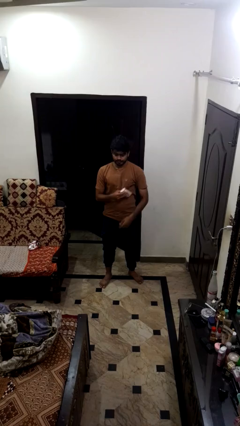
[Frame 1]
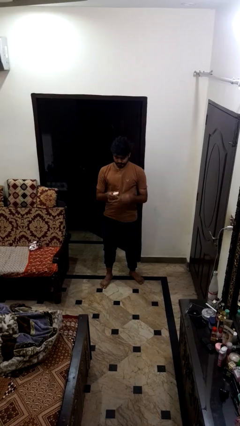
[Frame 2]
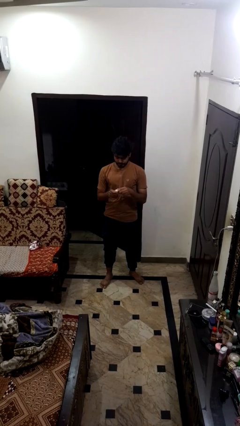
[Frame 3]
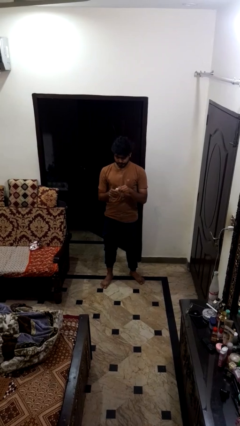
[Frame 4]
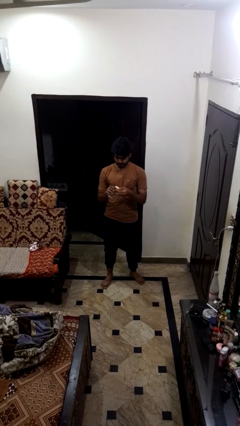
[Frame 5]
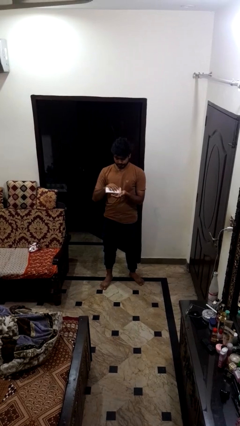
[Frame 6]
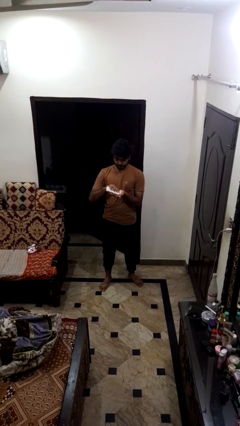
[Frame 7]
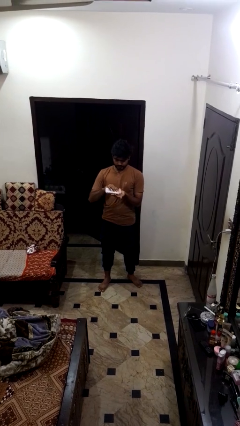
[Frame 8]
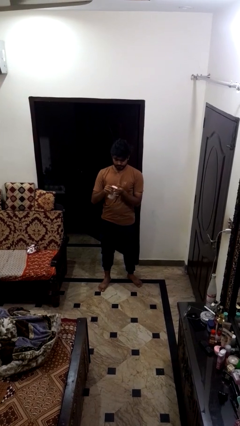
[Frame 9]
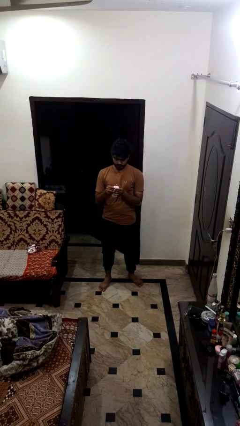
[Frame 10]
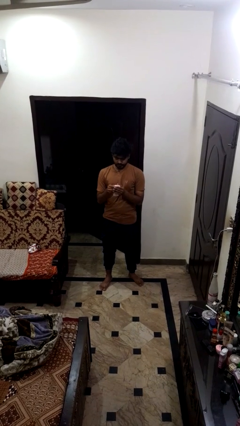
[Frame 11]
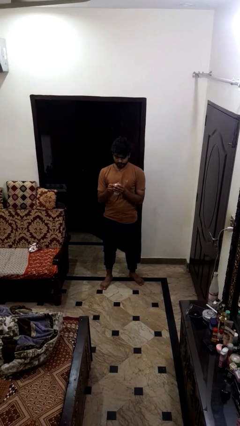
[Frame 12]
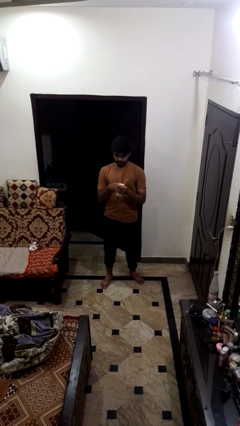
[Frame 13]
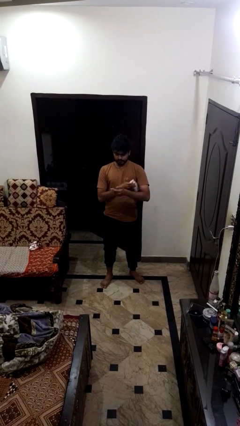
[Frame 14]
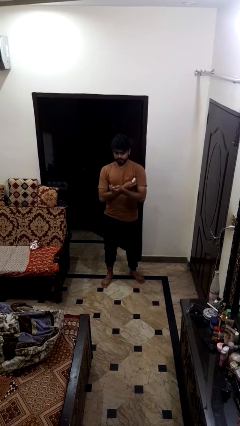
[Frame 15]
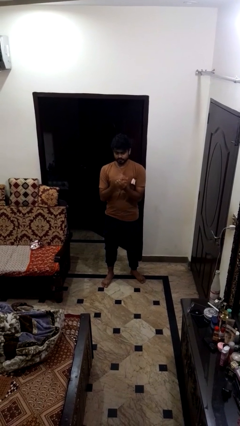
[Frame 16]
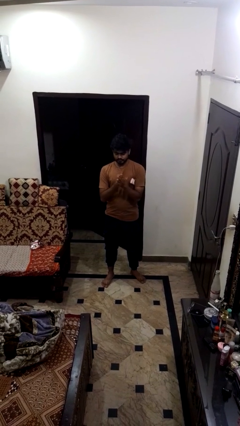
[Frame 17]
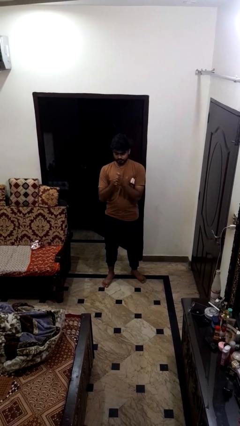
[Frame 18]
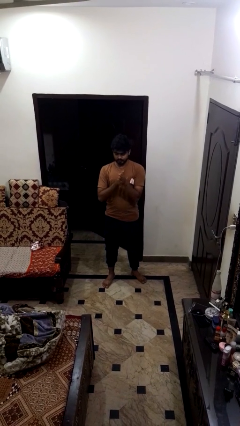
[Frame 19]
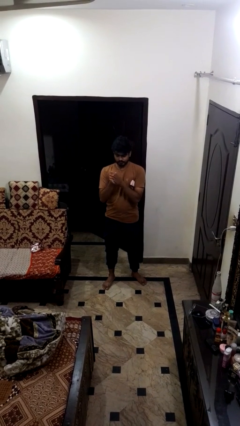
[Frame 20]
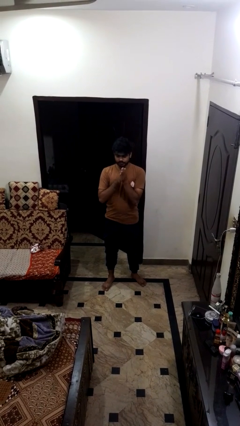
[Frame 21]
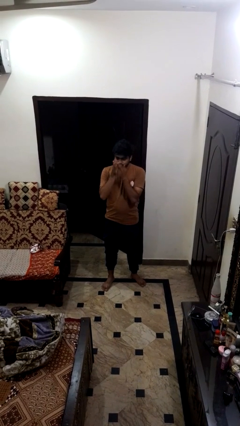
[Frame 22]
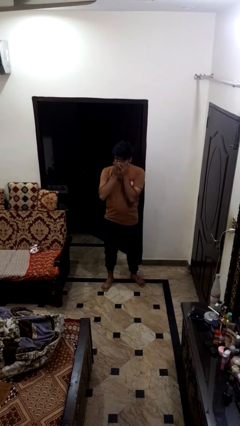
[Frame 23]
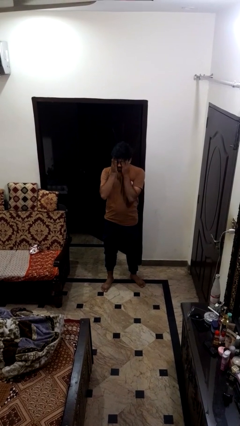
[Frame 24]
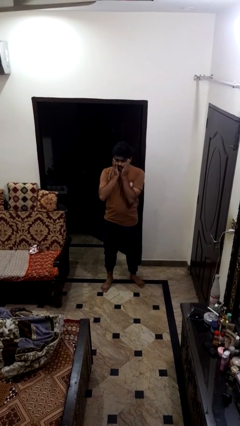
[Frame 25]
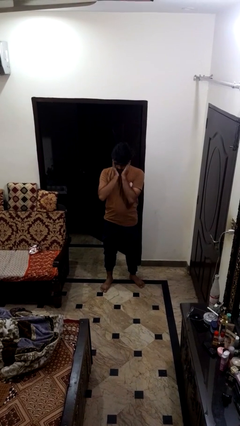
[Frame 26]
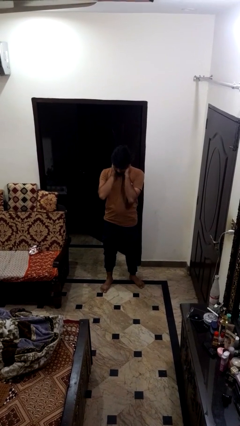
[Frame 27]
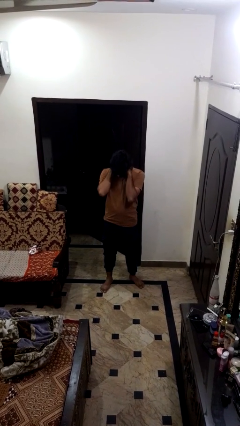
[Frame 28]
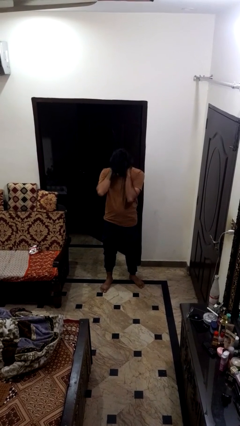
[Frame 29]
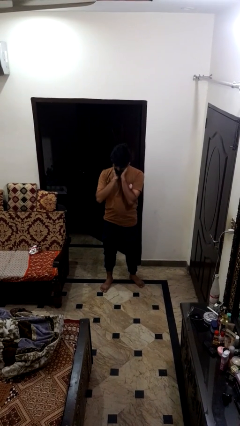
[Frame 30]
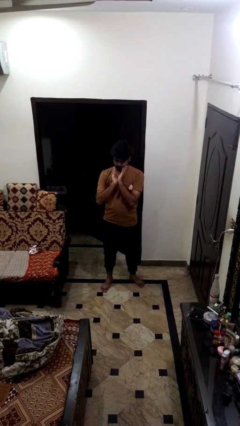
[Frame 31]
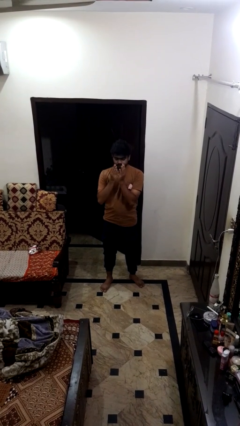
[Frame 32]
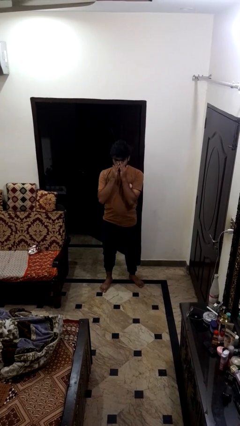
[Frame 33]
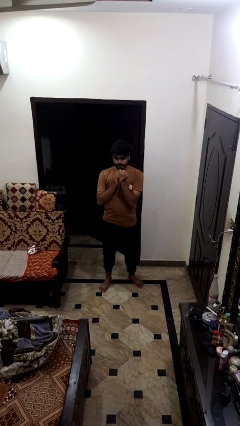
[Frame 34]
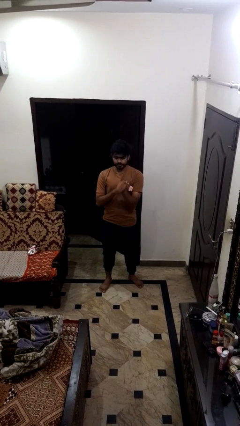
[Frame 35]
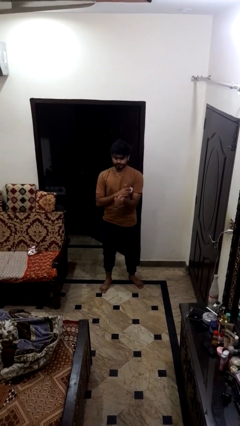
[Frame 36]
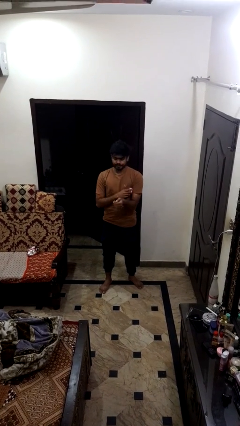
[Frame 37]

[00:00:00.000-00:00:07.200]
person applies facial moisturizer

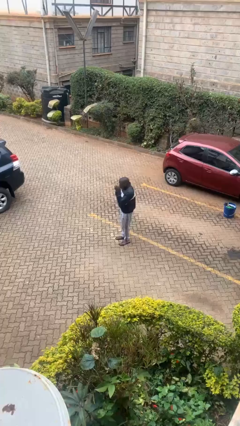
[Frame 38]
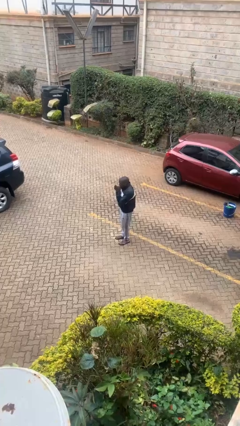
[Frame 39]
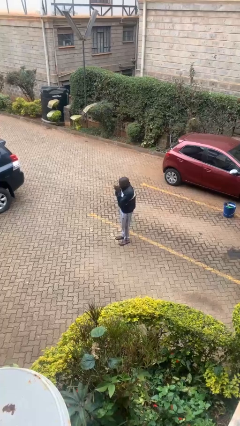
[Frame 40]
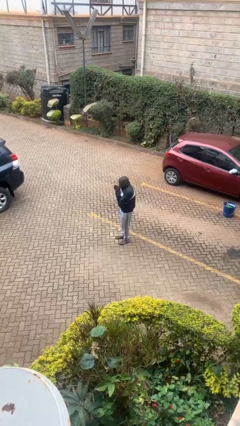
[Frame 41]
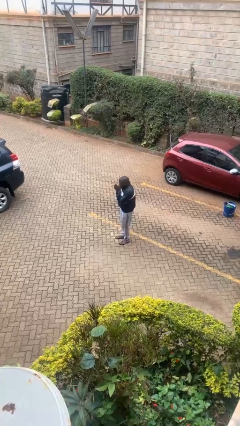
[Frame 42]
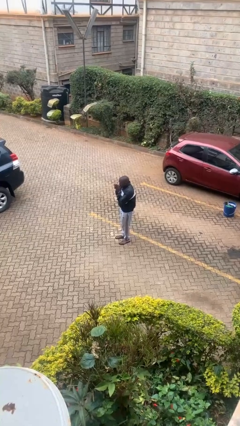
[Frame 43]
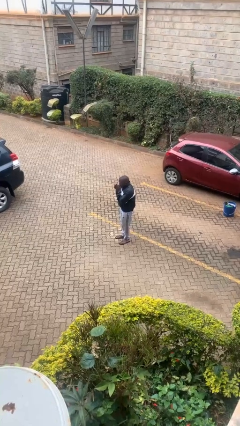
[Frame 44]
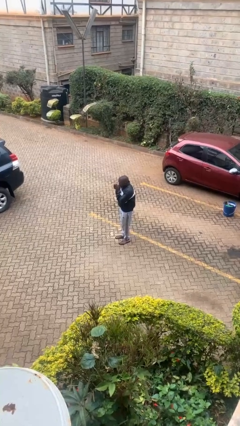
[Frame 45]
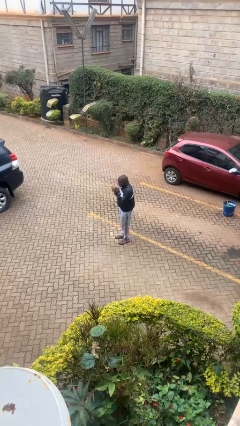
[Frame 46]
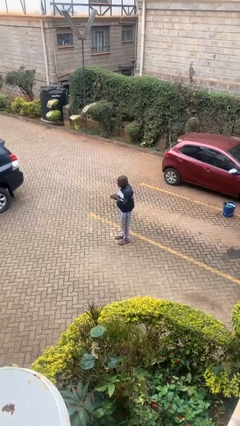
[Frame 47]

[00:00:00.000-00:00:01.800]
person blows into hands

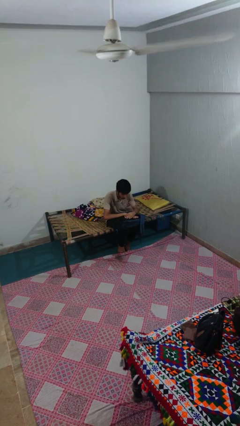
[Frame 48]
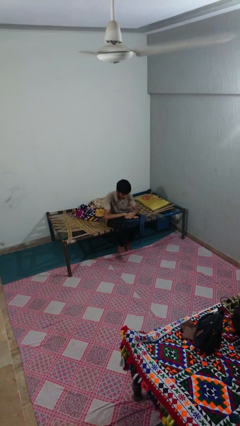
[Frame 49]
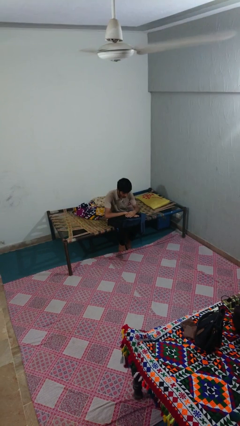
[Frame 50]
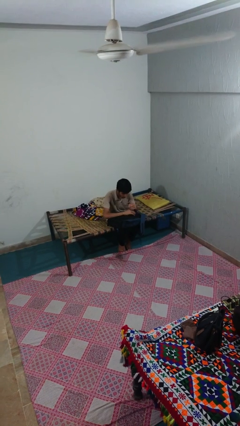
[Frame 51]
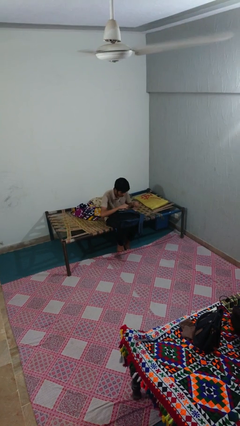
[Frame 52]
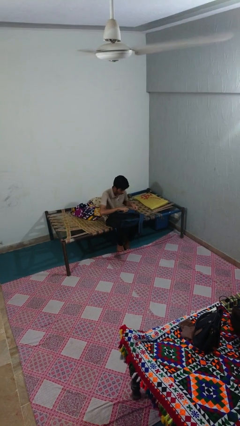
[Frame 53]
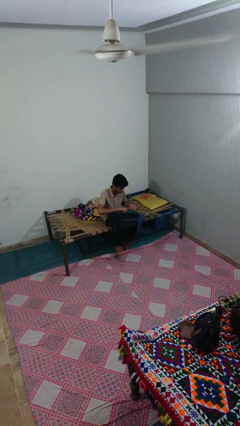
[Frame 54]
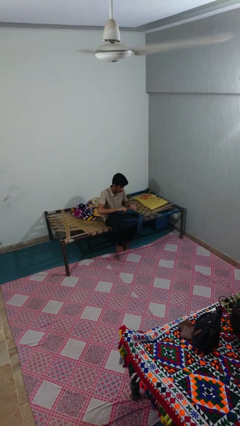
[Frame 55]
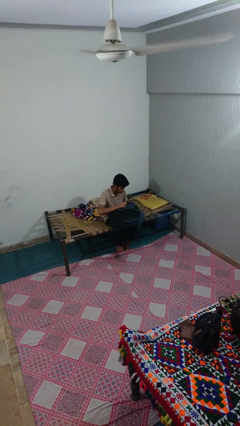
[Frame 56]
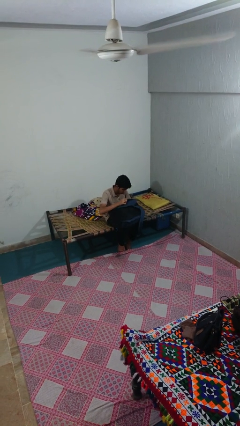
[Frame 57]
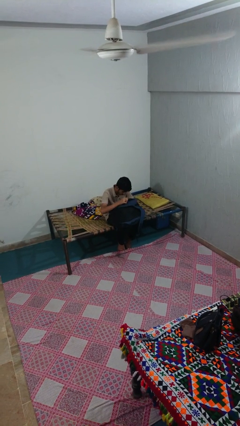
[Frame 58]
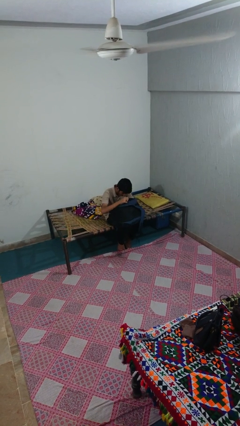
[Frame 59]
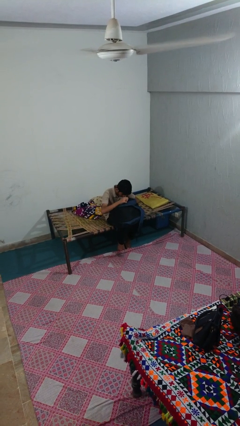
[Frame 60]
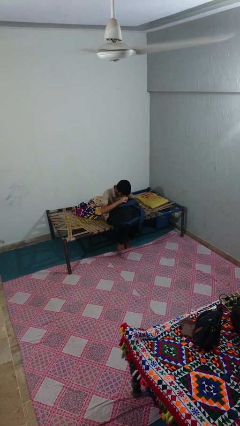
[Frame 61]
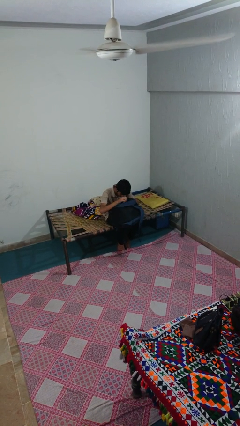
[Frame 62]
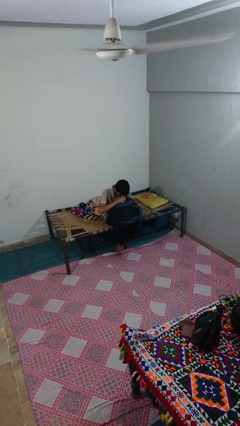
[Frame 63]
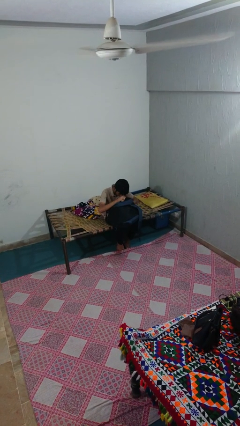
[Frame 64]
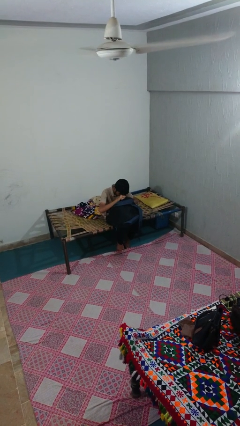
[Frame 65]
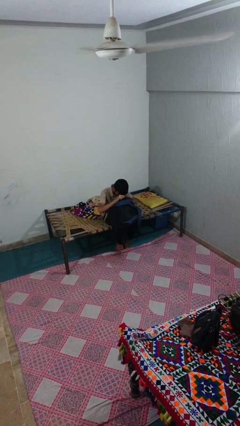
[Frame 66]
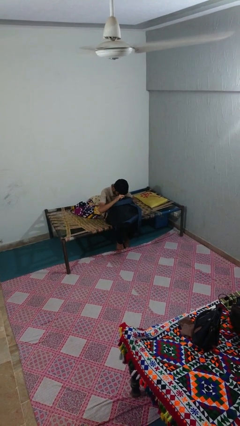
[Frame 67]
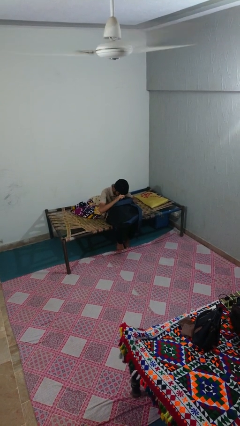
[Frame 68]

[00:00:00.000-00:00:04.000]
person searches in backpack

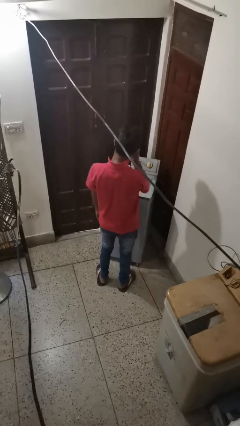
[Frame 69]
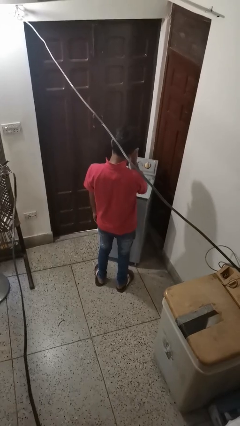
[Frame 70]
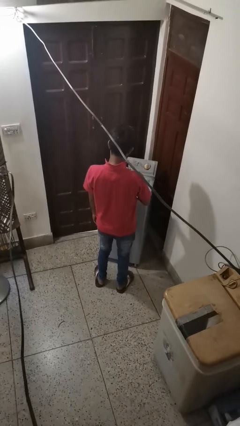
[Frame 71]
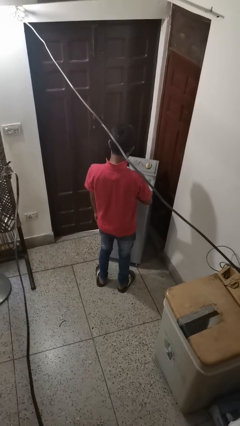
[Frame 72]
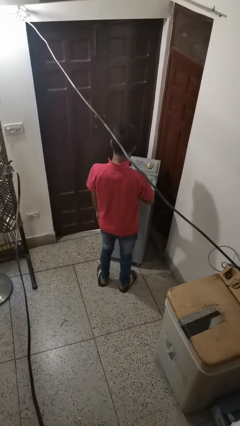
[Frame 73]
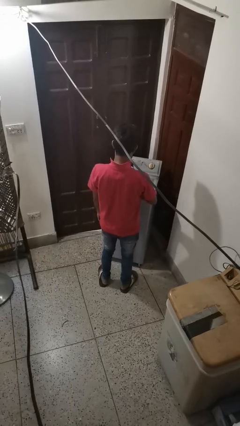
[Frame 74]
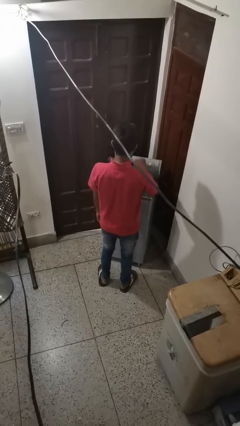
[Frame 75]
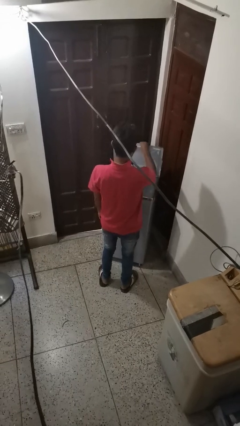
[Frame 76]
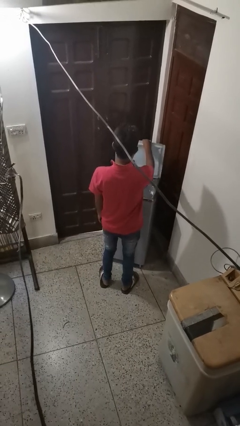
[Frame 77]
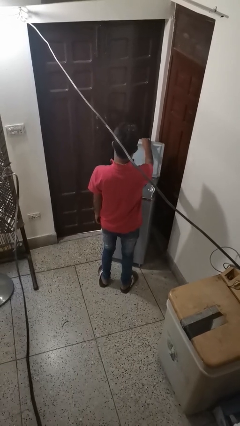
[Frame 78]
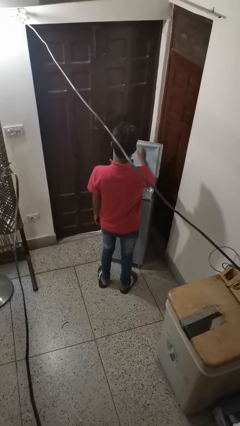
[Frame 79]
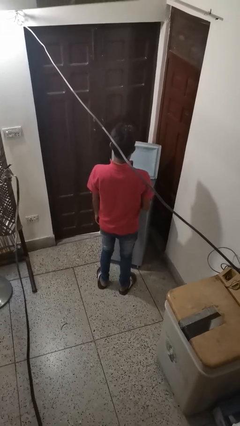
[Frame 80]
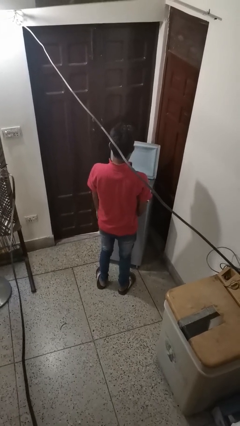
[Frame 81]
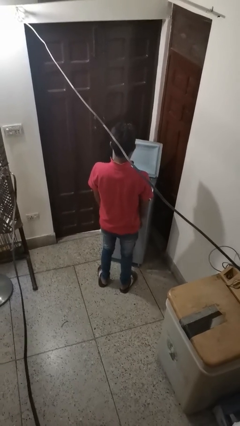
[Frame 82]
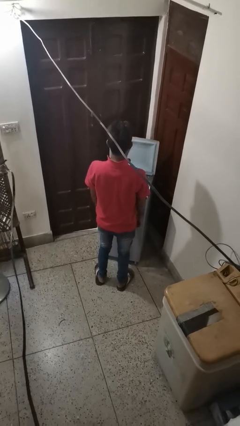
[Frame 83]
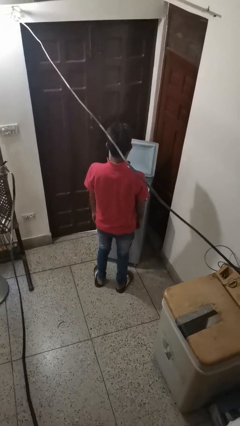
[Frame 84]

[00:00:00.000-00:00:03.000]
person opens clothes washer

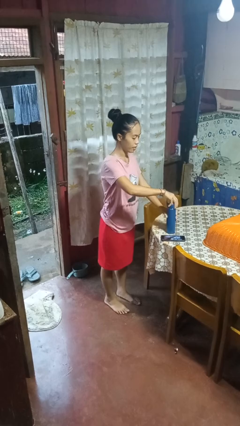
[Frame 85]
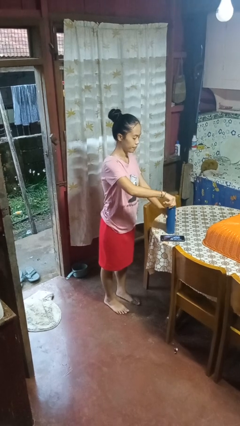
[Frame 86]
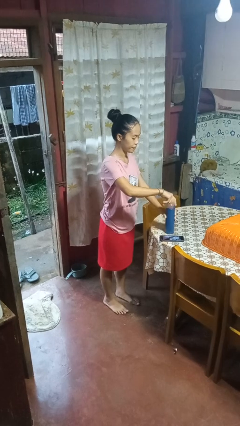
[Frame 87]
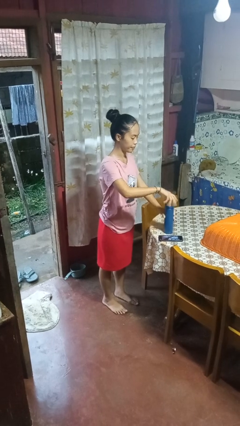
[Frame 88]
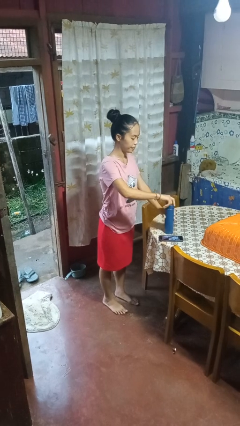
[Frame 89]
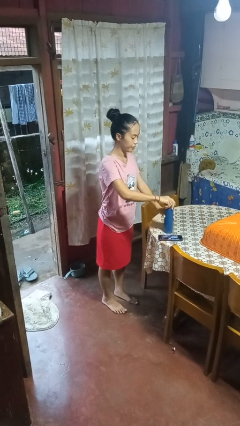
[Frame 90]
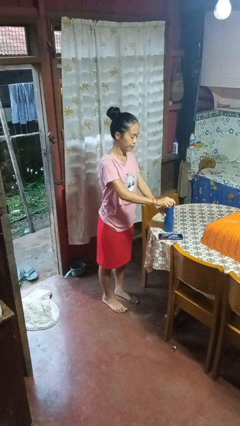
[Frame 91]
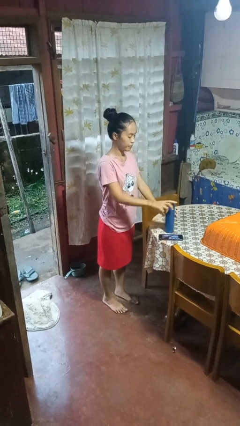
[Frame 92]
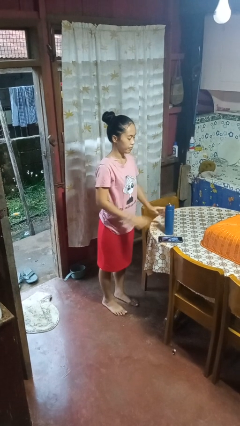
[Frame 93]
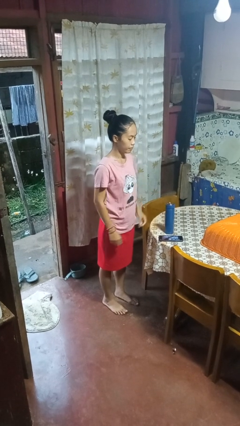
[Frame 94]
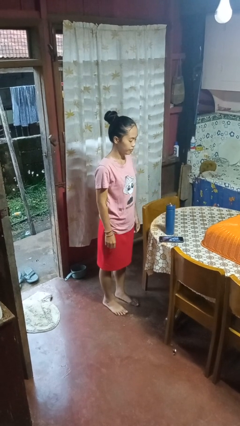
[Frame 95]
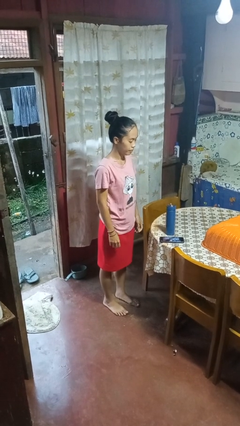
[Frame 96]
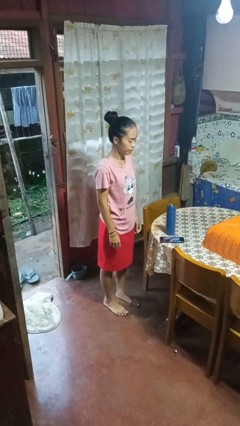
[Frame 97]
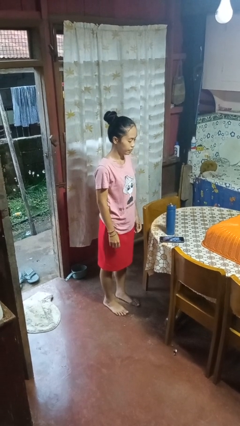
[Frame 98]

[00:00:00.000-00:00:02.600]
person closes jar
